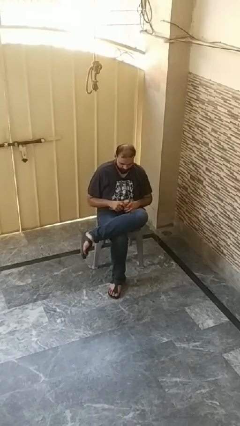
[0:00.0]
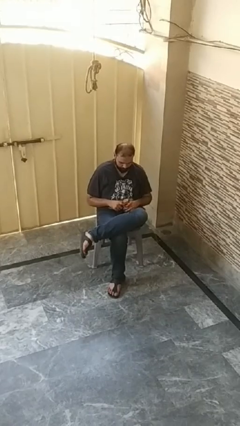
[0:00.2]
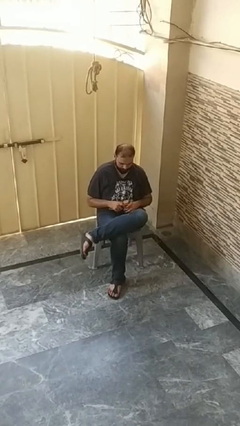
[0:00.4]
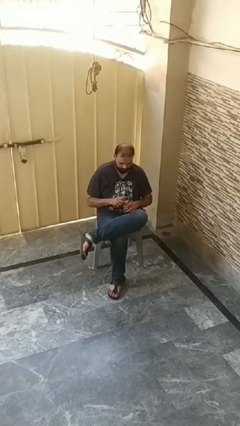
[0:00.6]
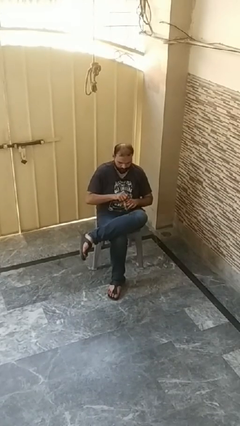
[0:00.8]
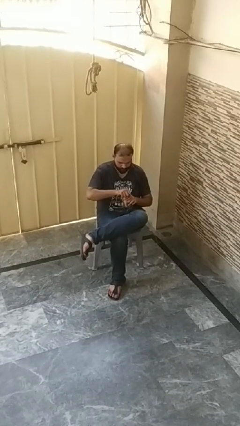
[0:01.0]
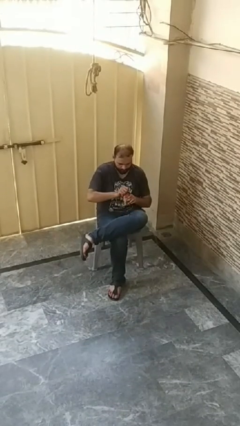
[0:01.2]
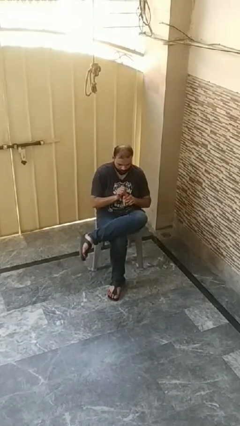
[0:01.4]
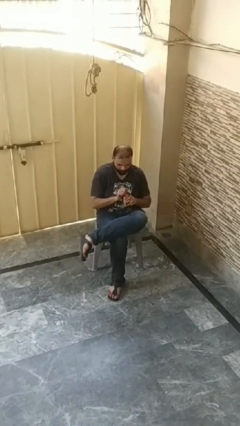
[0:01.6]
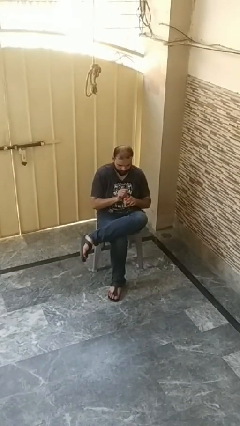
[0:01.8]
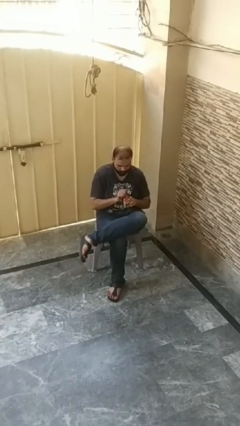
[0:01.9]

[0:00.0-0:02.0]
person opens beverage can

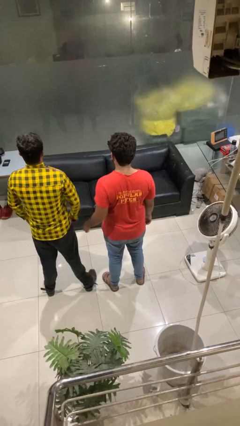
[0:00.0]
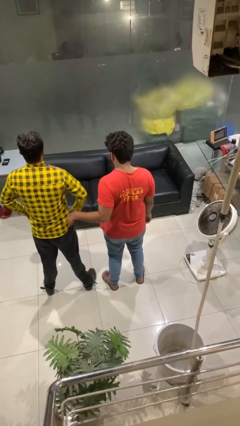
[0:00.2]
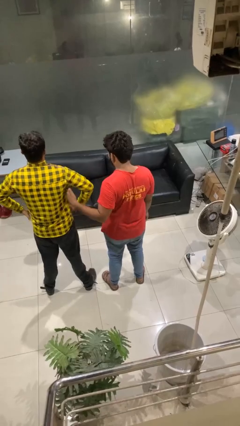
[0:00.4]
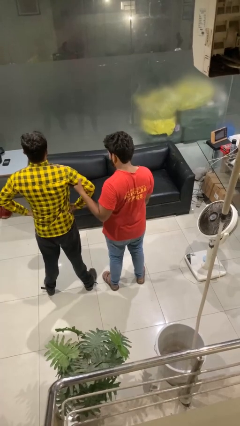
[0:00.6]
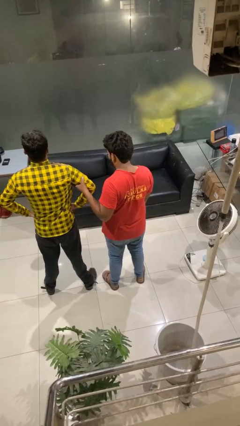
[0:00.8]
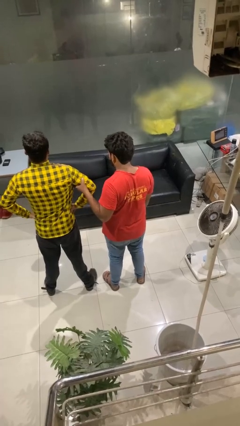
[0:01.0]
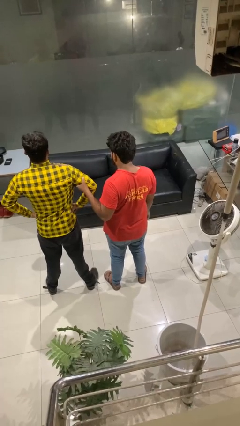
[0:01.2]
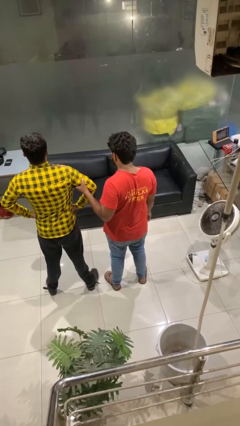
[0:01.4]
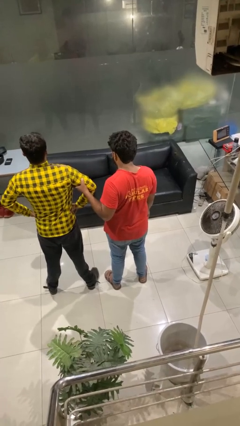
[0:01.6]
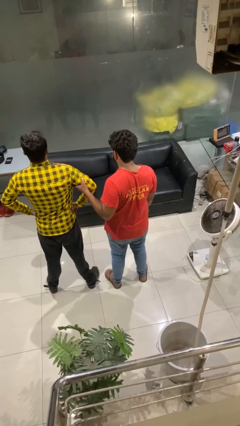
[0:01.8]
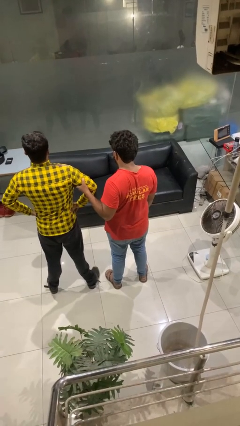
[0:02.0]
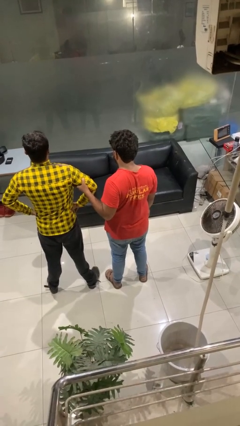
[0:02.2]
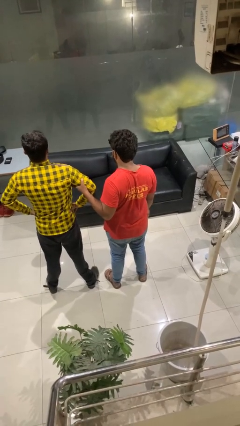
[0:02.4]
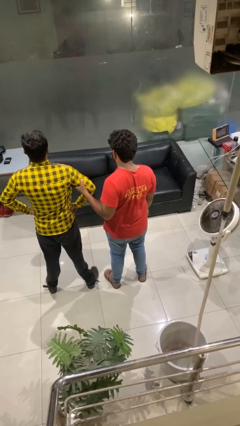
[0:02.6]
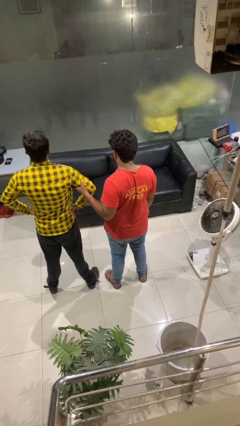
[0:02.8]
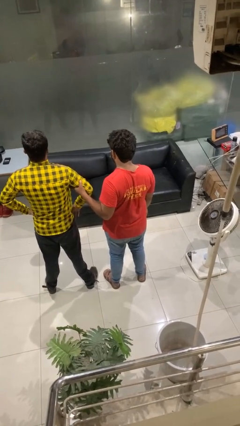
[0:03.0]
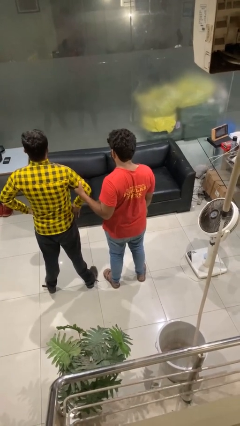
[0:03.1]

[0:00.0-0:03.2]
person grabs person by bicep

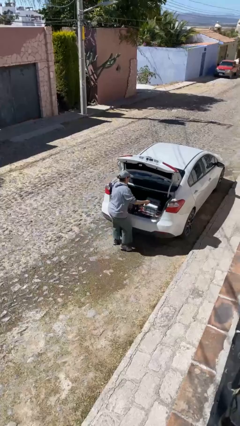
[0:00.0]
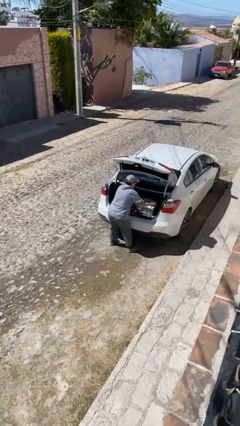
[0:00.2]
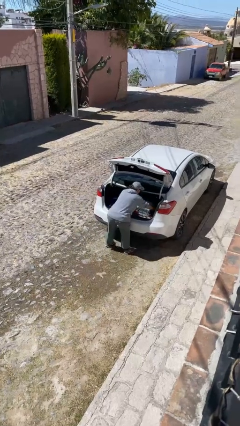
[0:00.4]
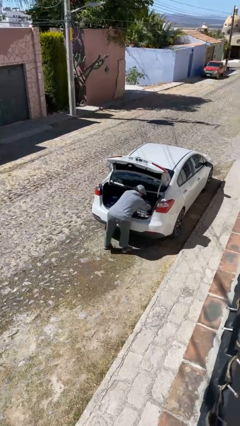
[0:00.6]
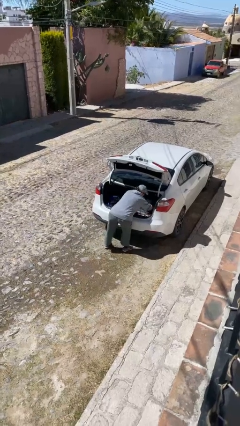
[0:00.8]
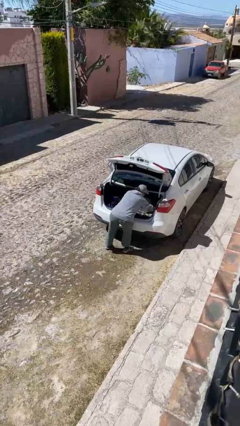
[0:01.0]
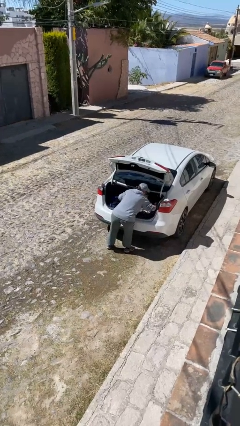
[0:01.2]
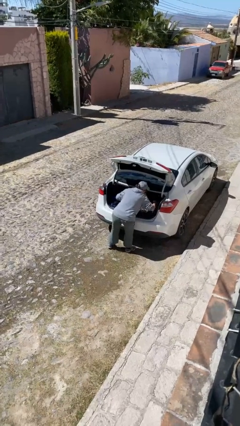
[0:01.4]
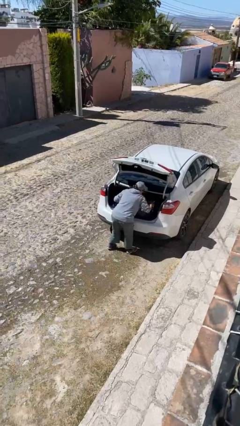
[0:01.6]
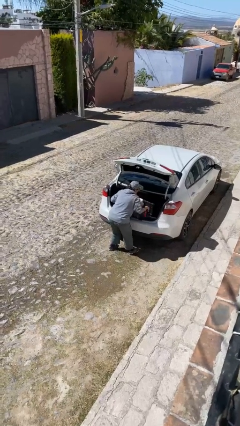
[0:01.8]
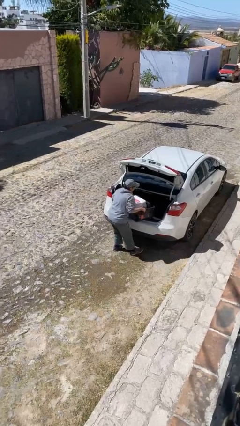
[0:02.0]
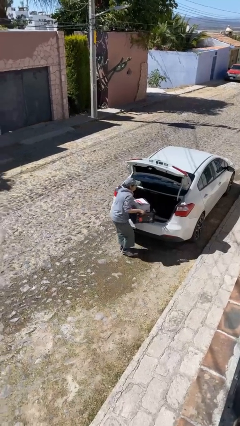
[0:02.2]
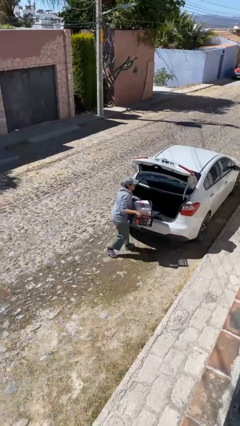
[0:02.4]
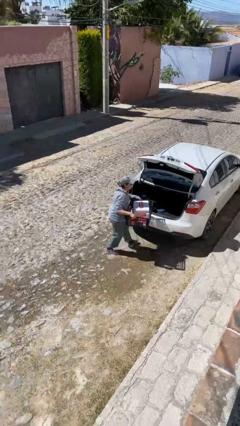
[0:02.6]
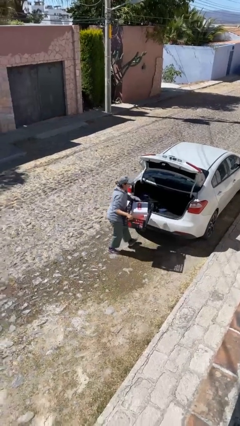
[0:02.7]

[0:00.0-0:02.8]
person unloads car

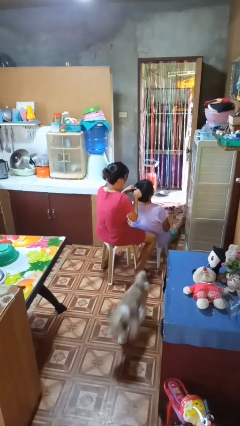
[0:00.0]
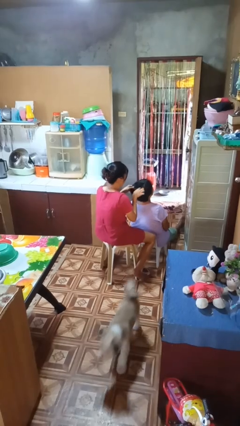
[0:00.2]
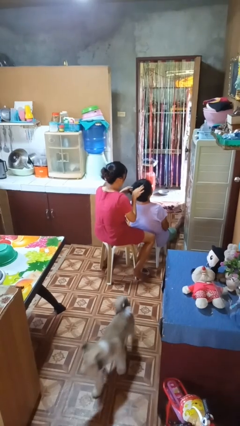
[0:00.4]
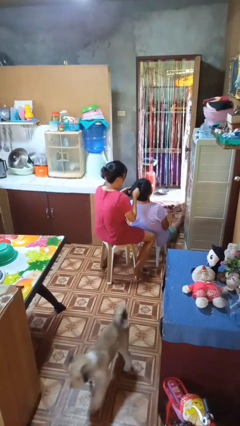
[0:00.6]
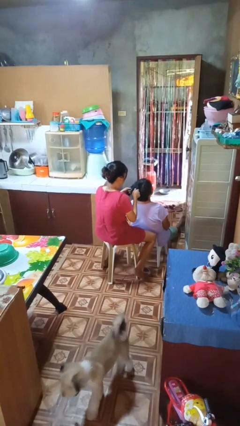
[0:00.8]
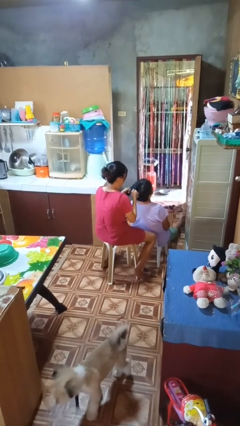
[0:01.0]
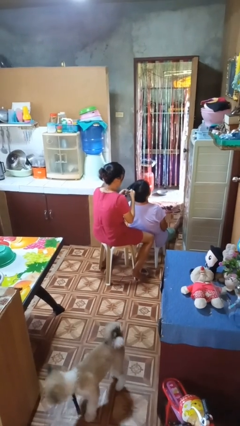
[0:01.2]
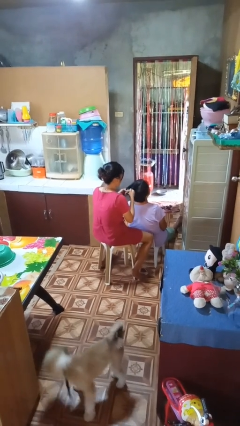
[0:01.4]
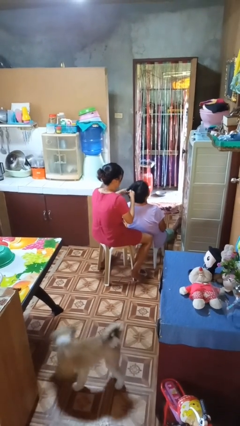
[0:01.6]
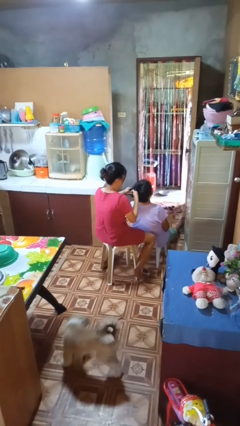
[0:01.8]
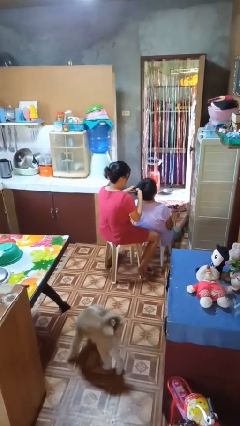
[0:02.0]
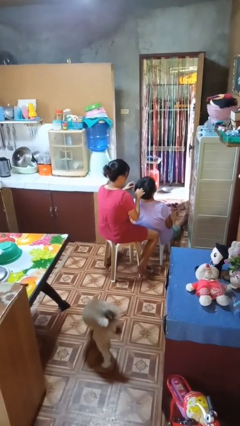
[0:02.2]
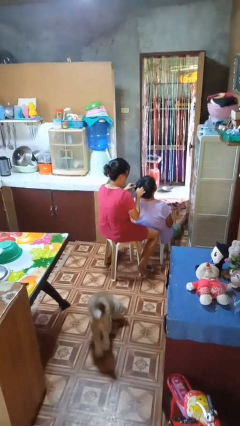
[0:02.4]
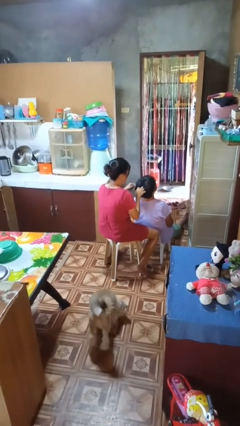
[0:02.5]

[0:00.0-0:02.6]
person braids hair of person

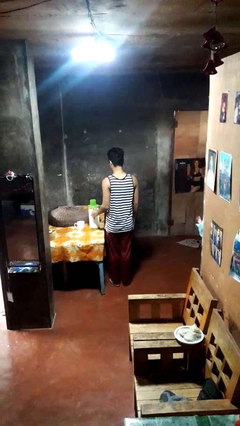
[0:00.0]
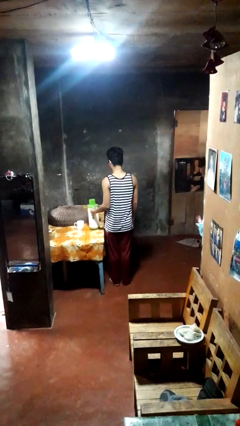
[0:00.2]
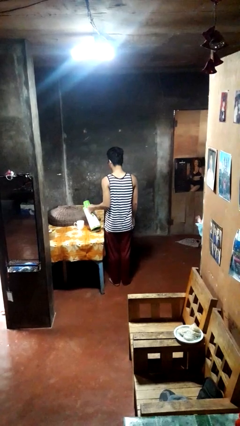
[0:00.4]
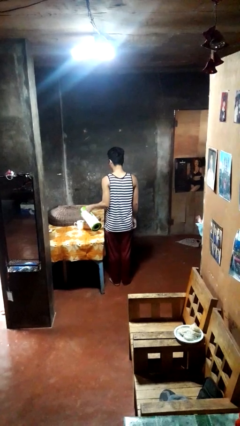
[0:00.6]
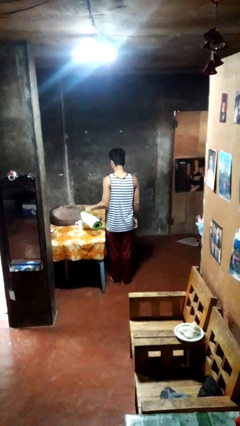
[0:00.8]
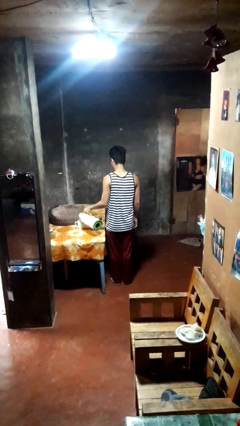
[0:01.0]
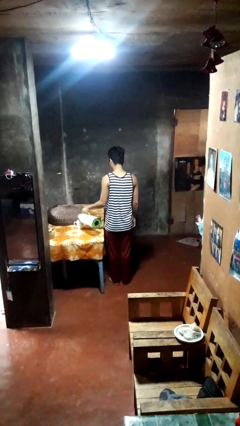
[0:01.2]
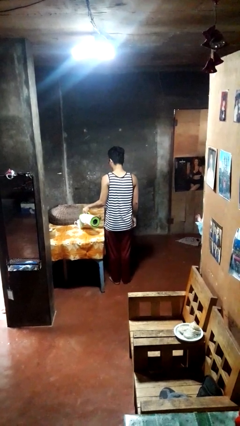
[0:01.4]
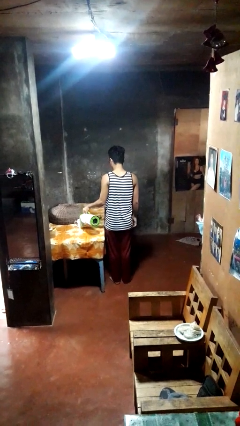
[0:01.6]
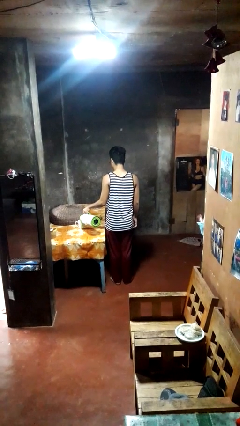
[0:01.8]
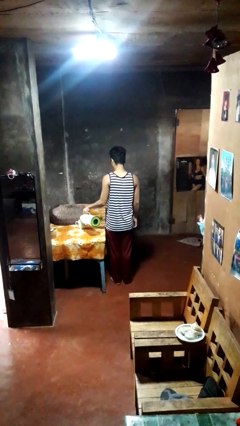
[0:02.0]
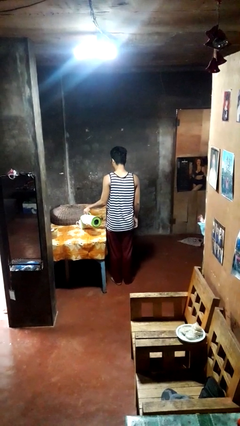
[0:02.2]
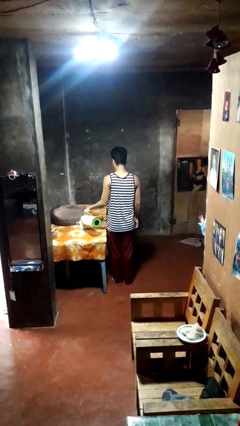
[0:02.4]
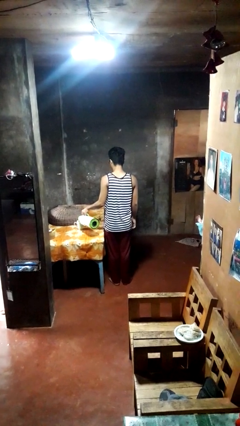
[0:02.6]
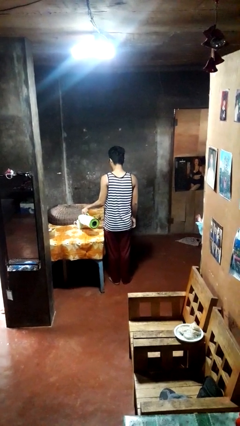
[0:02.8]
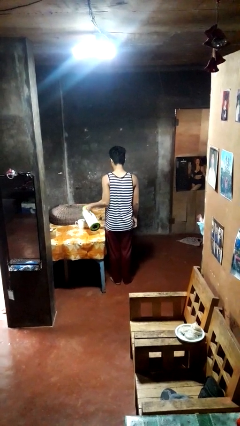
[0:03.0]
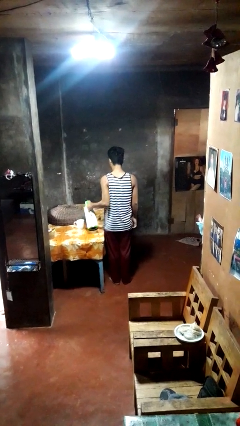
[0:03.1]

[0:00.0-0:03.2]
person pours coffee into mug

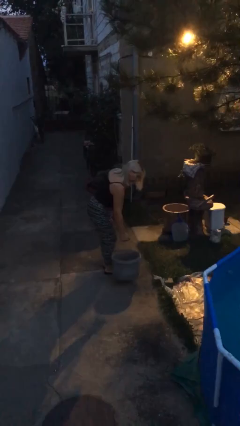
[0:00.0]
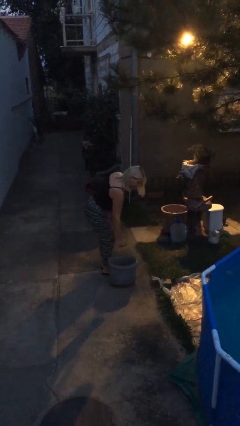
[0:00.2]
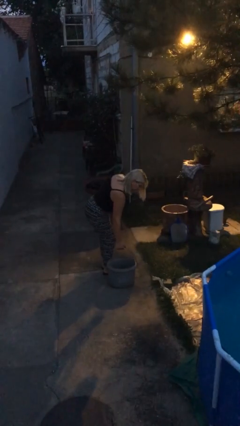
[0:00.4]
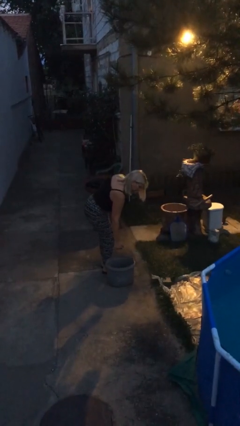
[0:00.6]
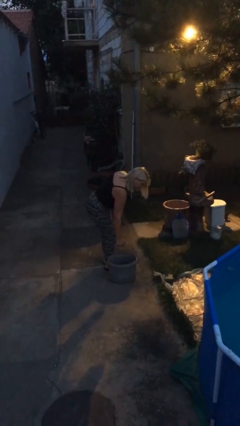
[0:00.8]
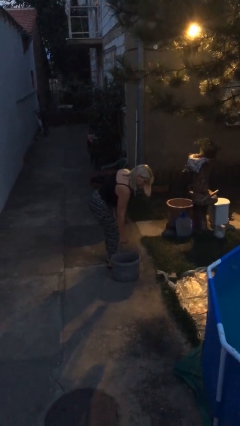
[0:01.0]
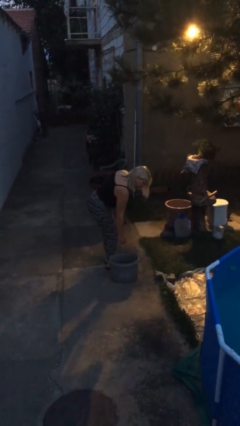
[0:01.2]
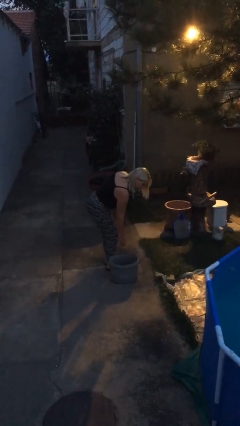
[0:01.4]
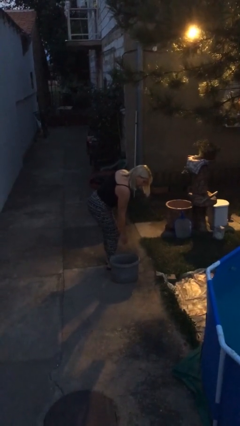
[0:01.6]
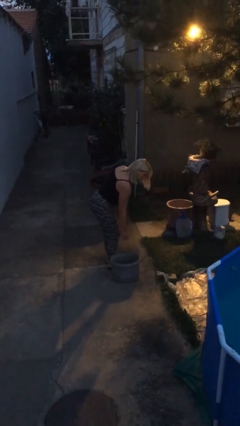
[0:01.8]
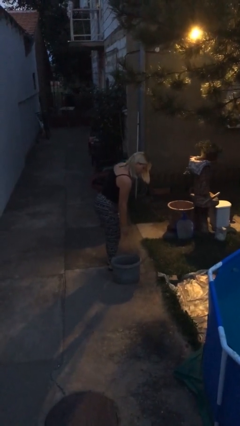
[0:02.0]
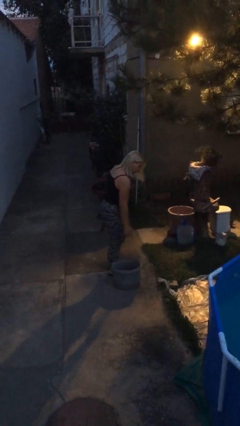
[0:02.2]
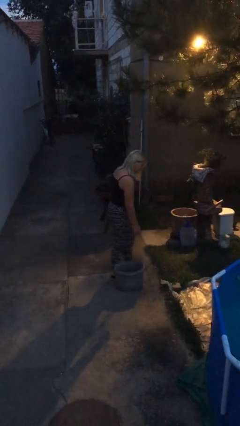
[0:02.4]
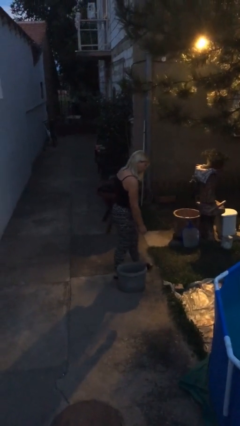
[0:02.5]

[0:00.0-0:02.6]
person puts down object on floor

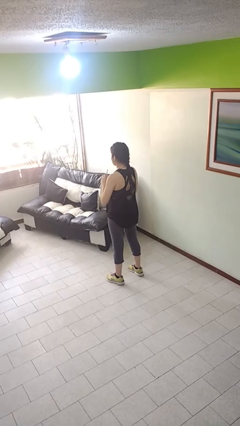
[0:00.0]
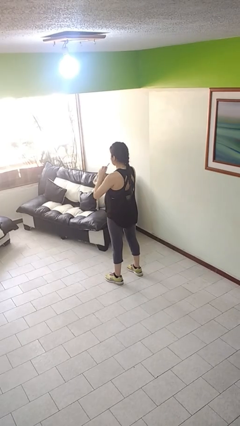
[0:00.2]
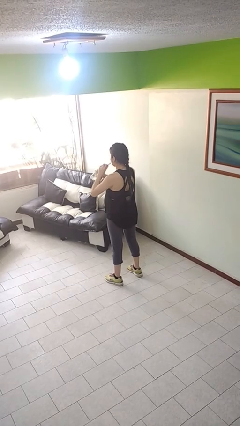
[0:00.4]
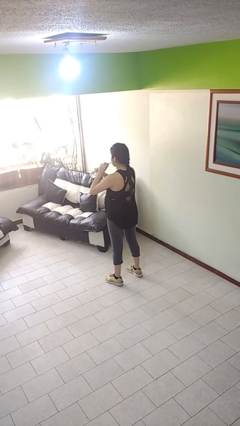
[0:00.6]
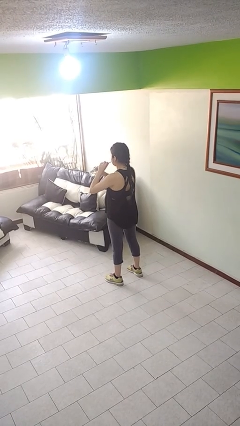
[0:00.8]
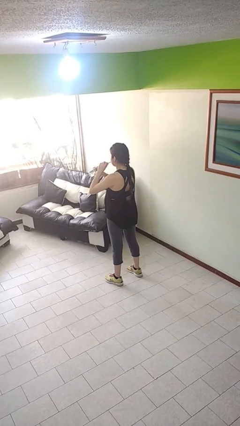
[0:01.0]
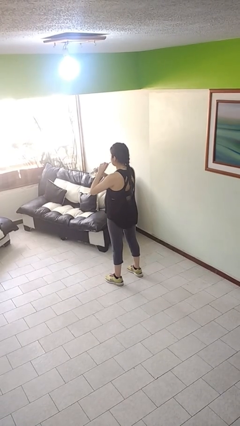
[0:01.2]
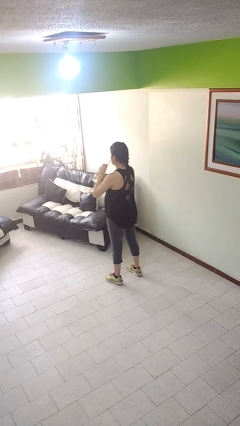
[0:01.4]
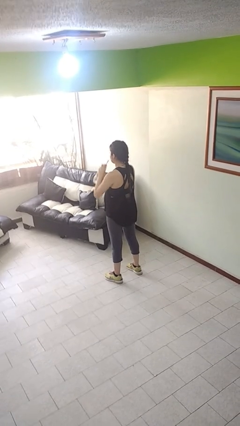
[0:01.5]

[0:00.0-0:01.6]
person drinks from straw
